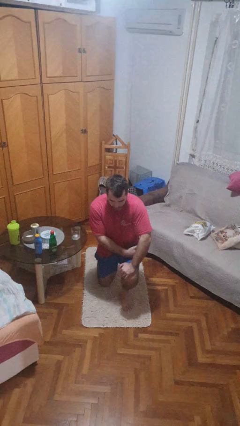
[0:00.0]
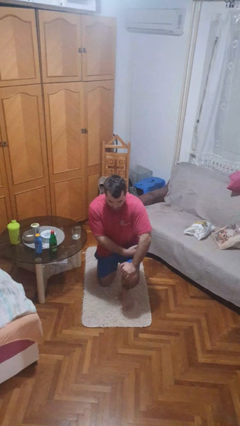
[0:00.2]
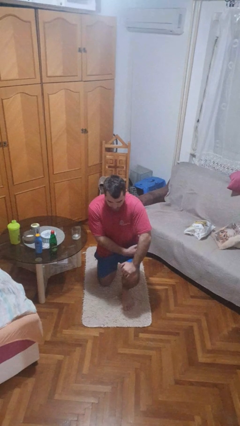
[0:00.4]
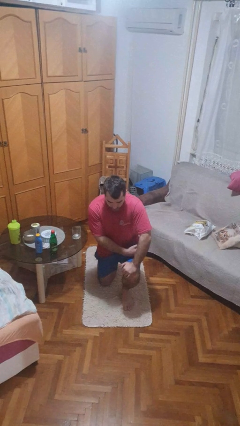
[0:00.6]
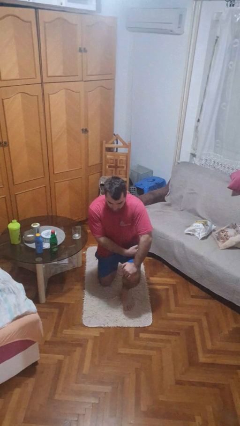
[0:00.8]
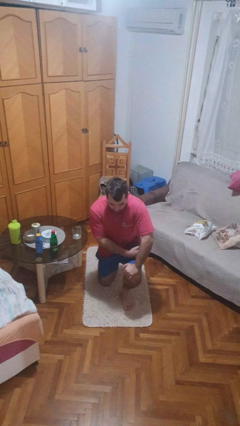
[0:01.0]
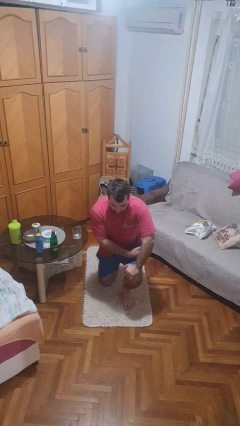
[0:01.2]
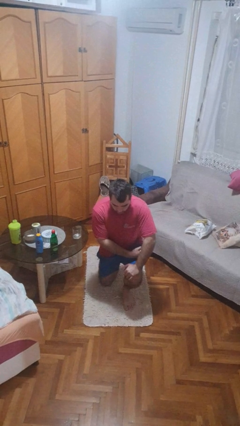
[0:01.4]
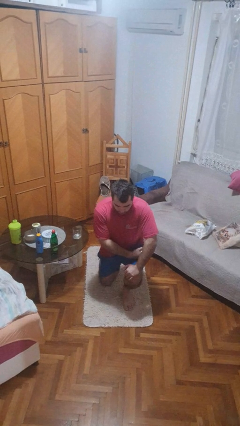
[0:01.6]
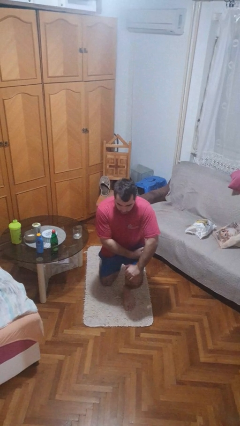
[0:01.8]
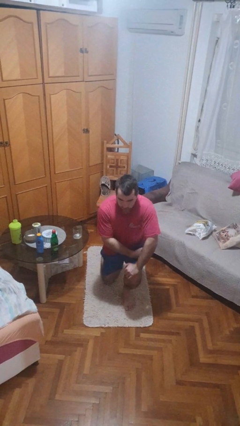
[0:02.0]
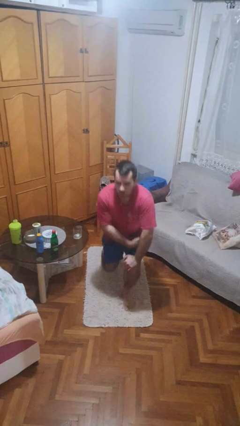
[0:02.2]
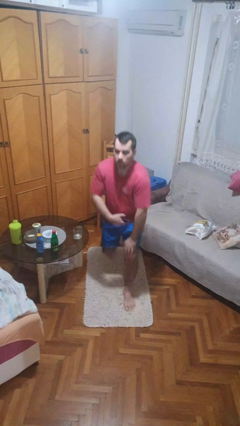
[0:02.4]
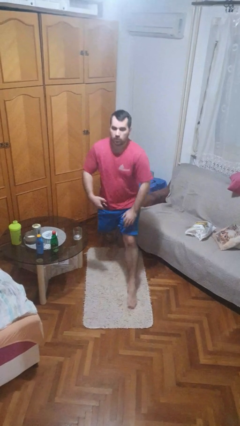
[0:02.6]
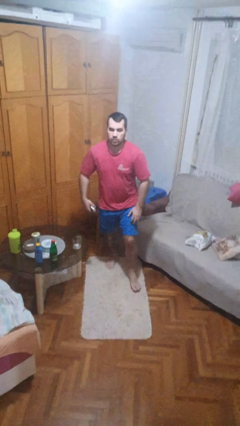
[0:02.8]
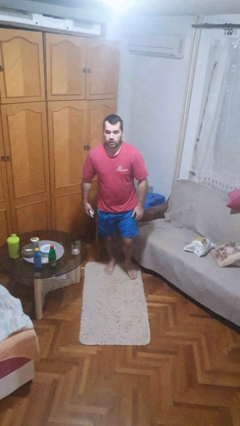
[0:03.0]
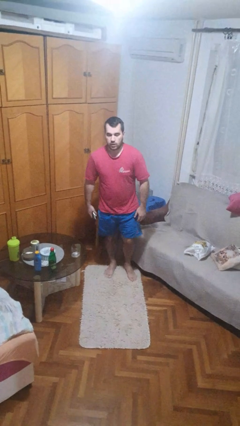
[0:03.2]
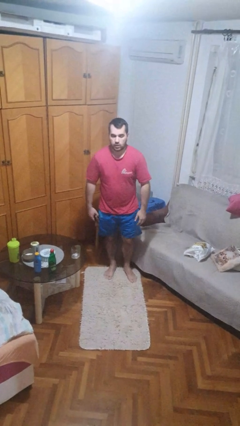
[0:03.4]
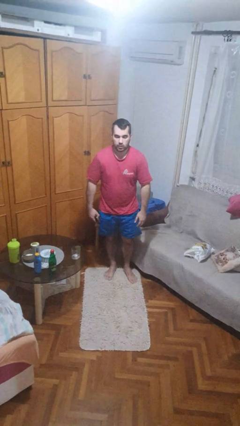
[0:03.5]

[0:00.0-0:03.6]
person stands up from floor

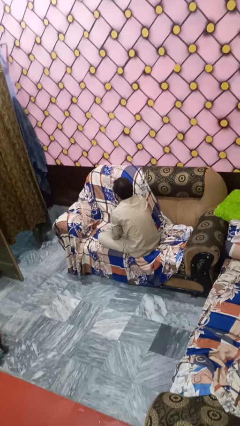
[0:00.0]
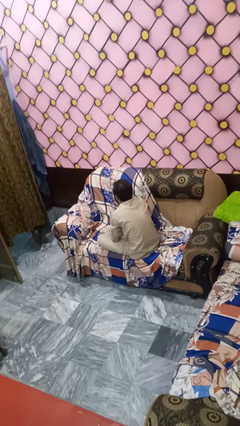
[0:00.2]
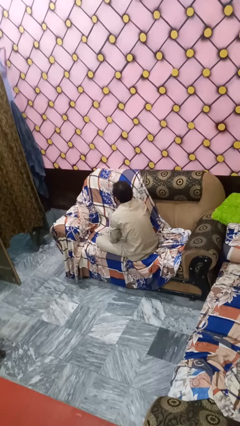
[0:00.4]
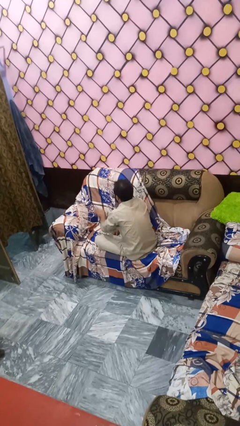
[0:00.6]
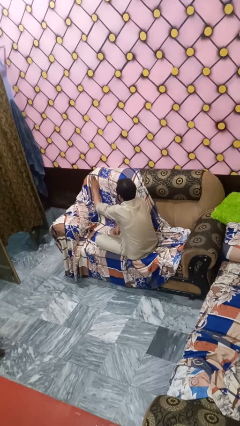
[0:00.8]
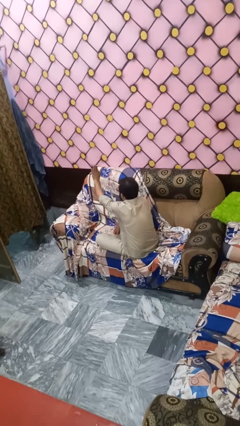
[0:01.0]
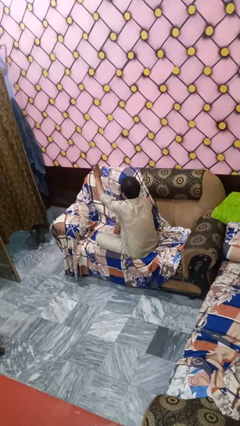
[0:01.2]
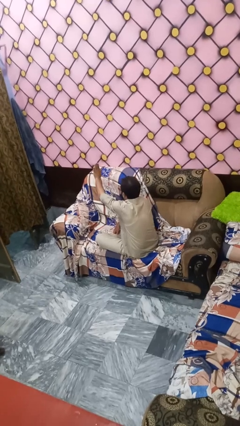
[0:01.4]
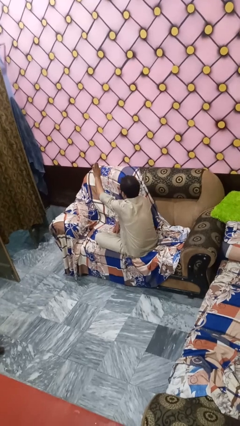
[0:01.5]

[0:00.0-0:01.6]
person gestures stop

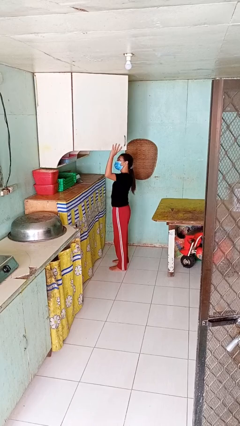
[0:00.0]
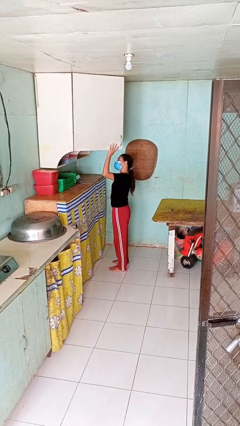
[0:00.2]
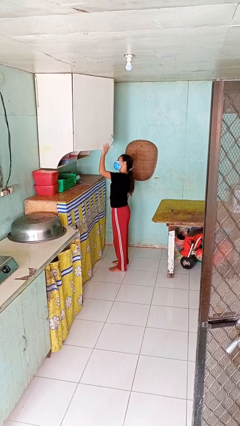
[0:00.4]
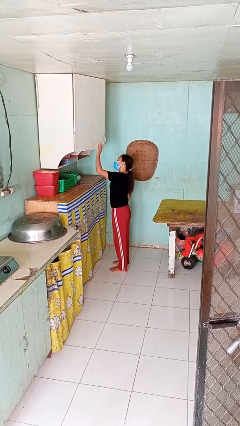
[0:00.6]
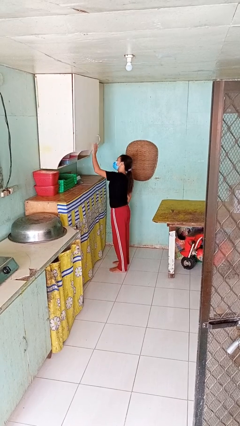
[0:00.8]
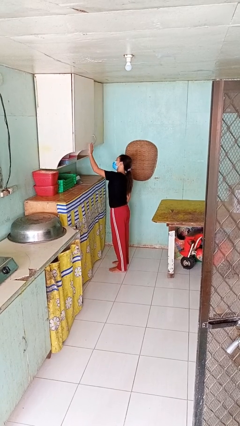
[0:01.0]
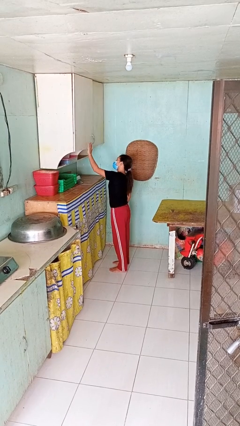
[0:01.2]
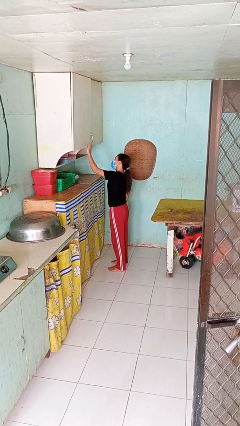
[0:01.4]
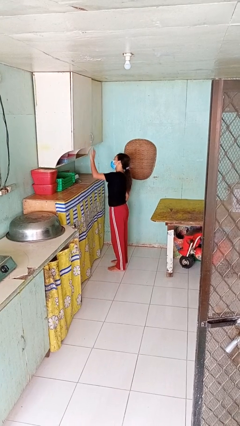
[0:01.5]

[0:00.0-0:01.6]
person closes cabinet

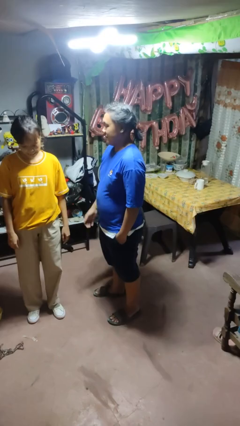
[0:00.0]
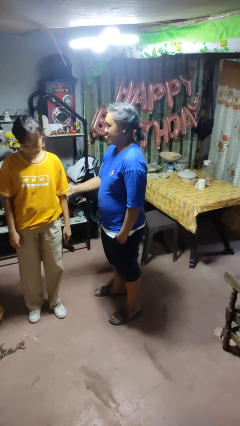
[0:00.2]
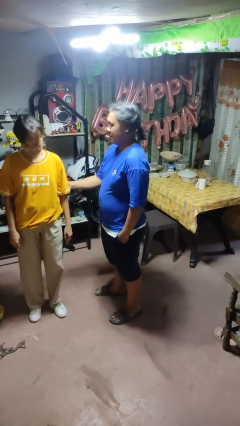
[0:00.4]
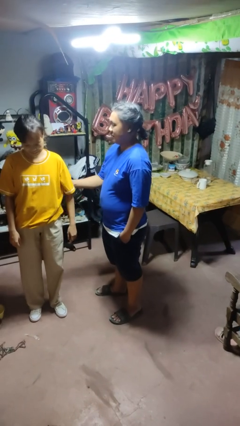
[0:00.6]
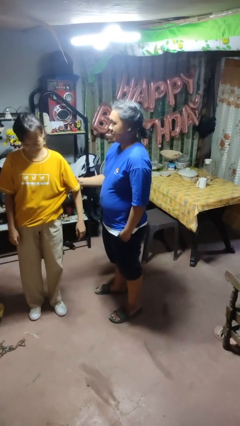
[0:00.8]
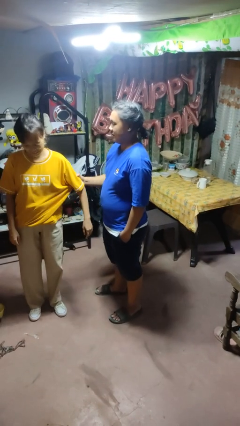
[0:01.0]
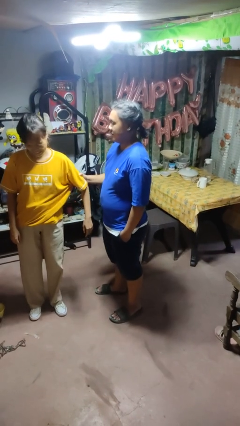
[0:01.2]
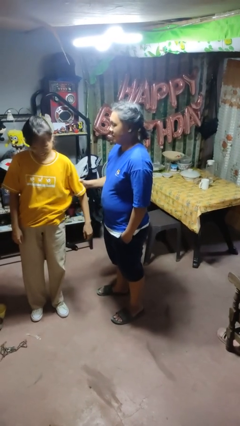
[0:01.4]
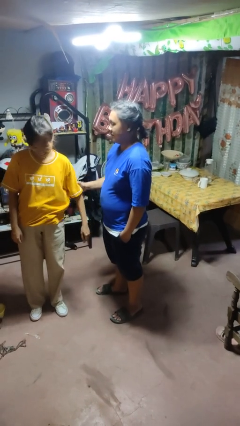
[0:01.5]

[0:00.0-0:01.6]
person grabs person by bicep

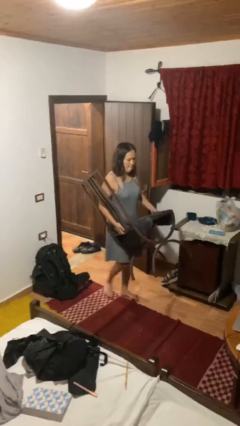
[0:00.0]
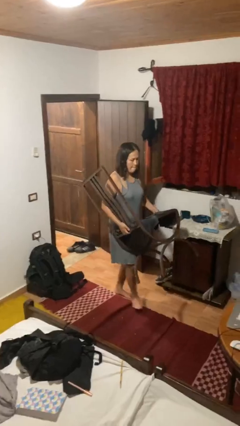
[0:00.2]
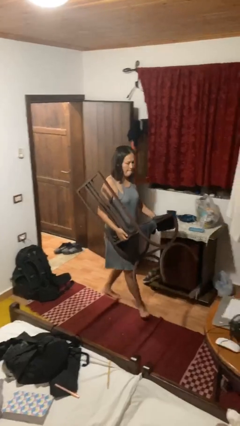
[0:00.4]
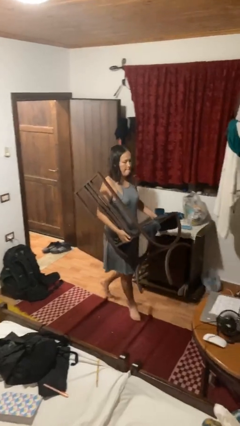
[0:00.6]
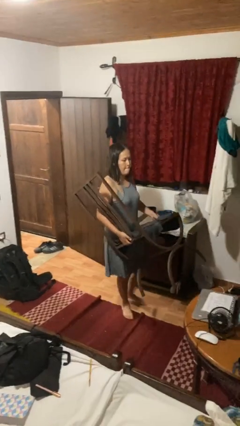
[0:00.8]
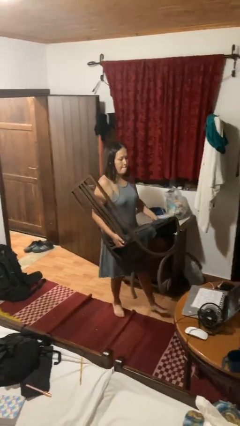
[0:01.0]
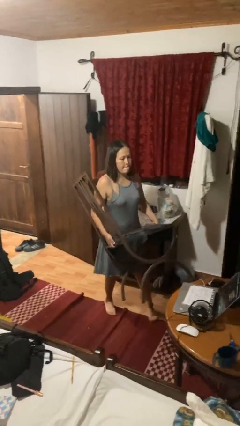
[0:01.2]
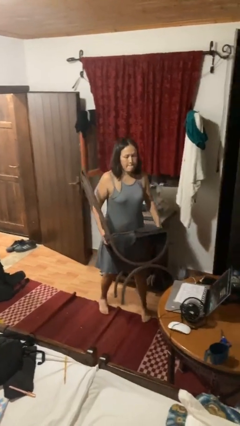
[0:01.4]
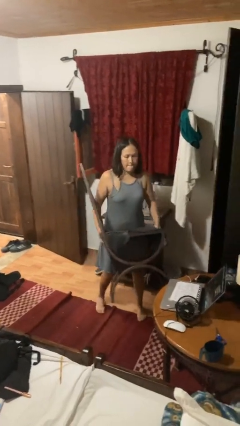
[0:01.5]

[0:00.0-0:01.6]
person carries furniture

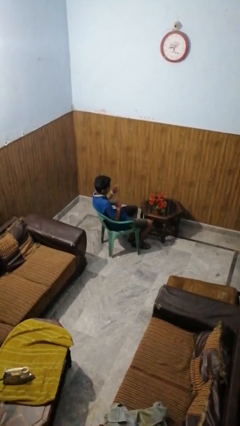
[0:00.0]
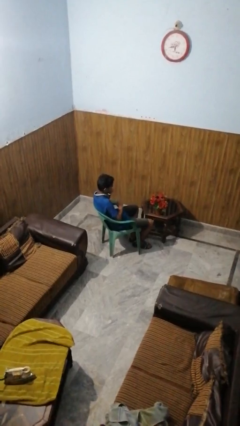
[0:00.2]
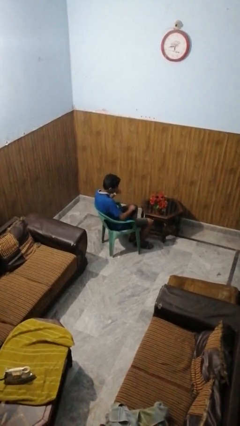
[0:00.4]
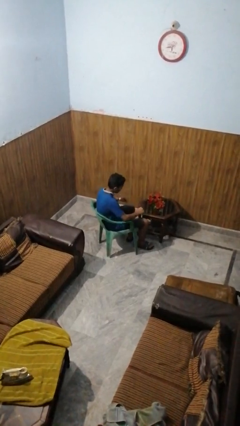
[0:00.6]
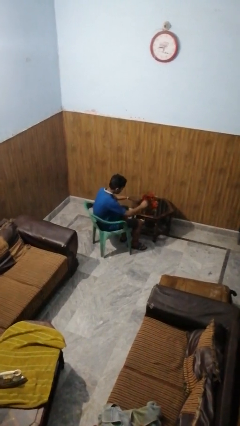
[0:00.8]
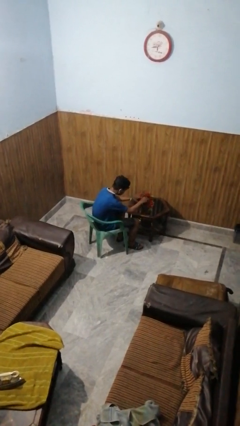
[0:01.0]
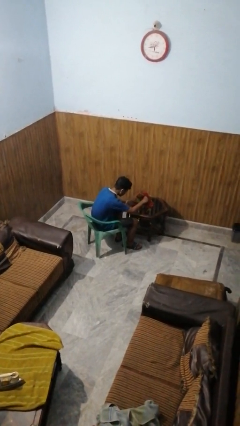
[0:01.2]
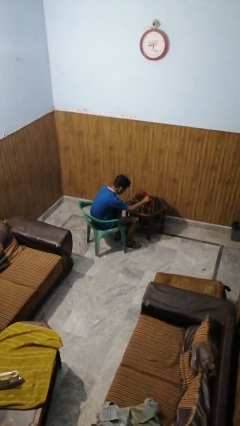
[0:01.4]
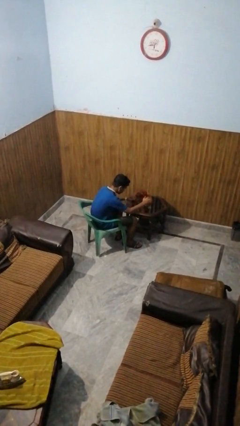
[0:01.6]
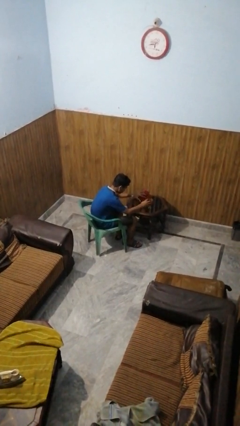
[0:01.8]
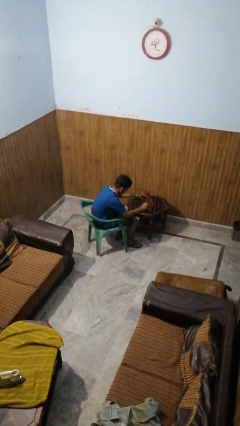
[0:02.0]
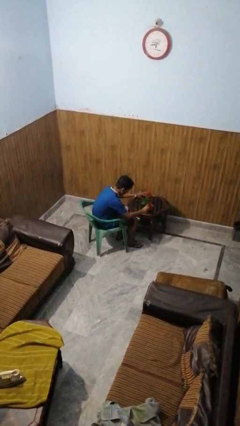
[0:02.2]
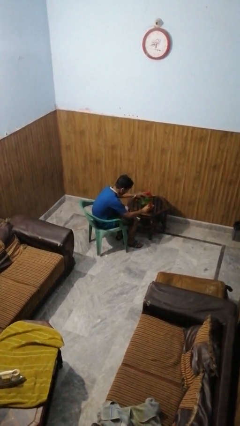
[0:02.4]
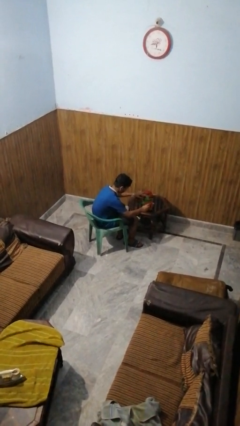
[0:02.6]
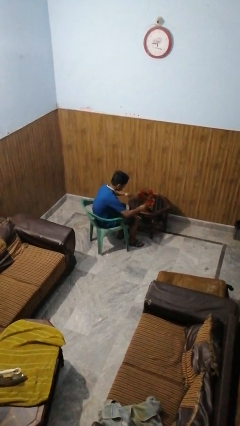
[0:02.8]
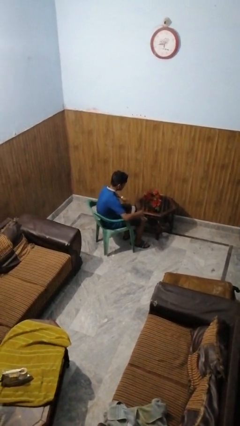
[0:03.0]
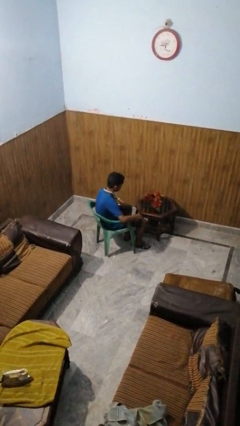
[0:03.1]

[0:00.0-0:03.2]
person arranges flowers in vase

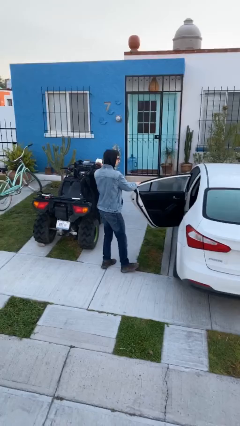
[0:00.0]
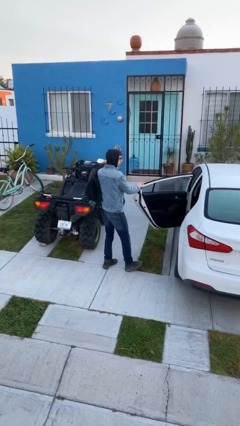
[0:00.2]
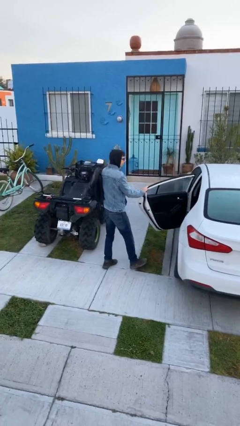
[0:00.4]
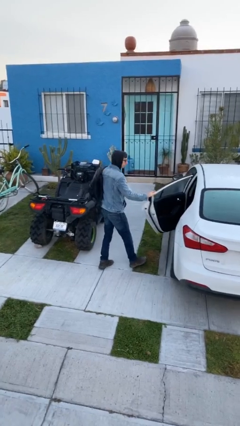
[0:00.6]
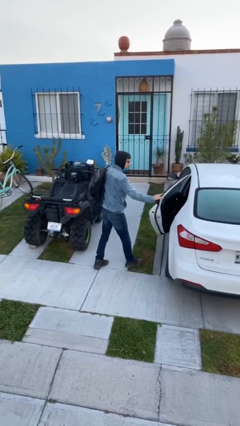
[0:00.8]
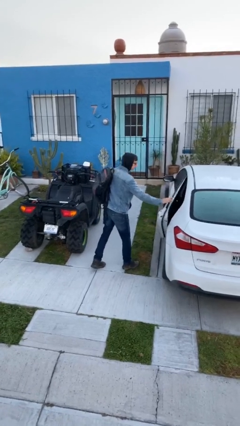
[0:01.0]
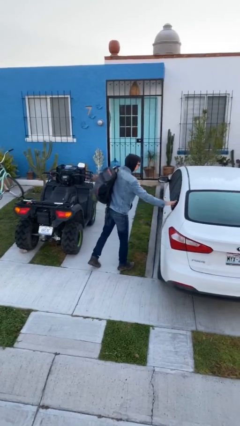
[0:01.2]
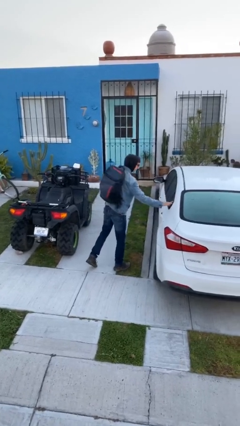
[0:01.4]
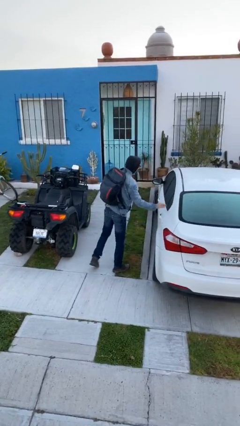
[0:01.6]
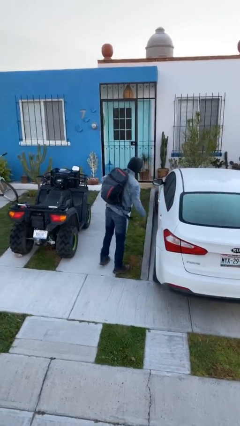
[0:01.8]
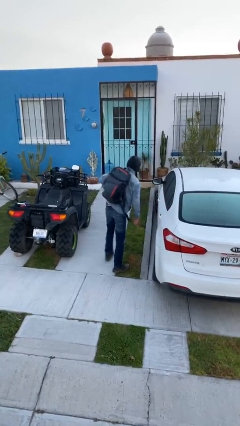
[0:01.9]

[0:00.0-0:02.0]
person closes car door

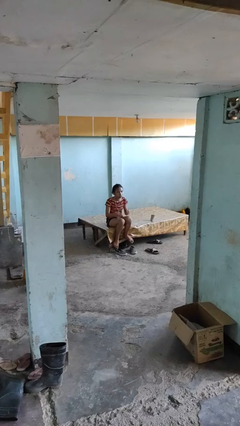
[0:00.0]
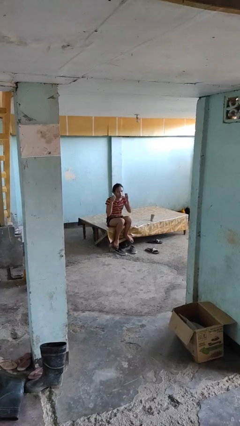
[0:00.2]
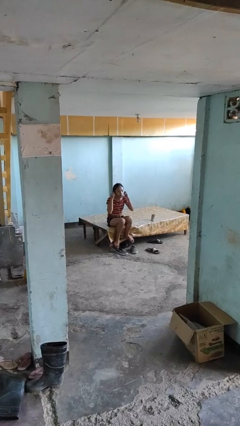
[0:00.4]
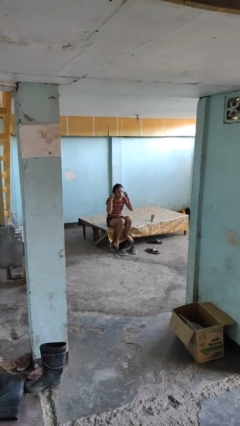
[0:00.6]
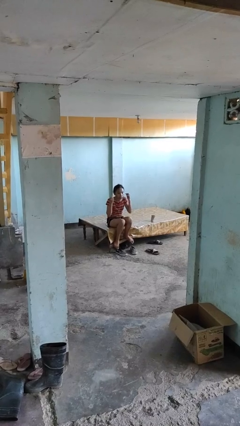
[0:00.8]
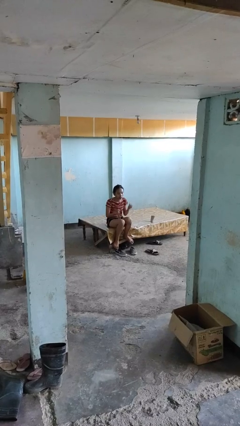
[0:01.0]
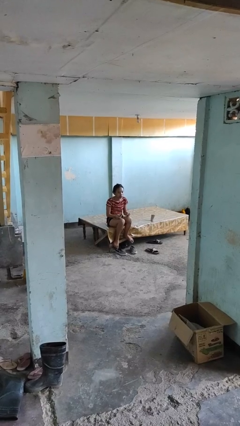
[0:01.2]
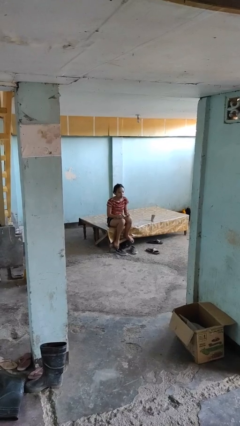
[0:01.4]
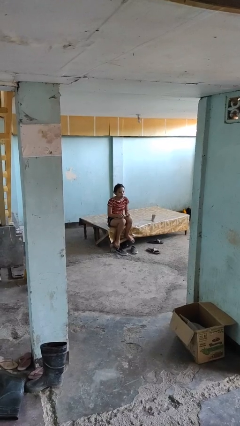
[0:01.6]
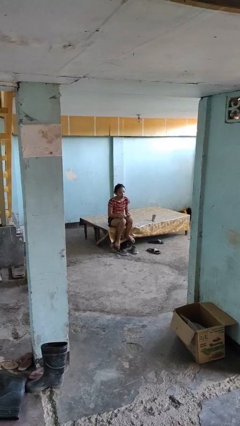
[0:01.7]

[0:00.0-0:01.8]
person takes off headphones
